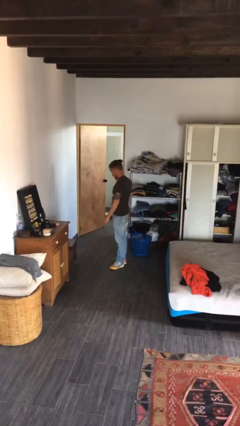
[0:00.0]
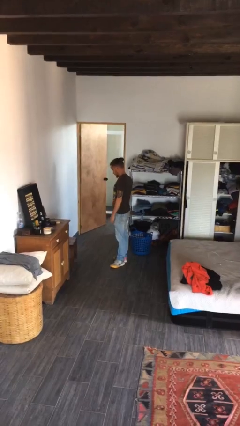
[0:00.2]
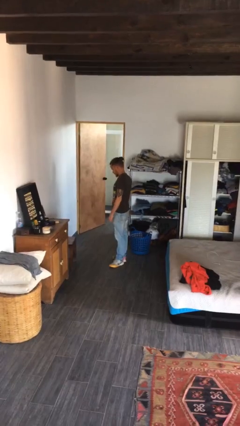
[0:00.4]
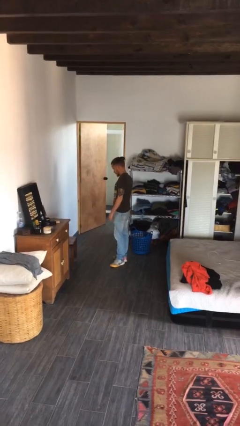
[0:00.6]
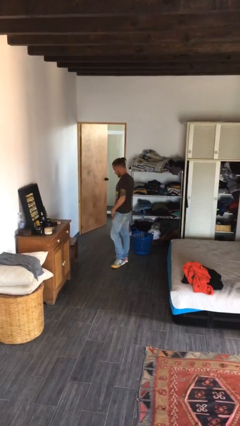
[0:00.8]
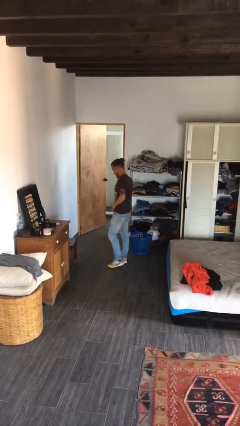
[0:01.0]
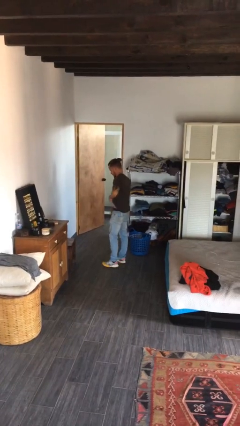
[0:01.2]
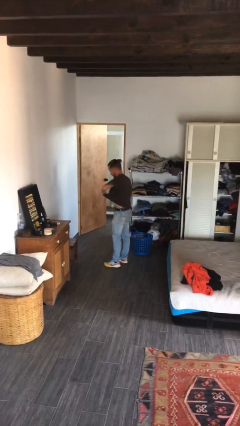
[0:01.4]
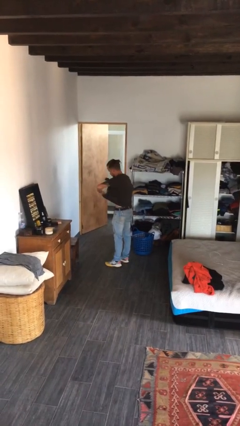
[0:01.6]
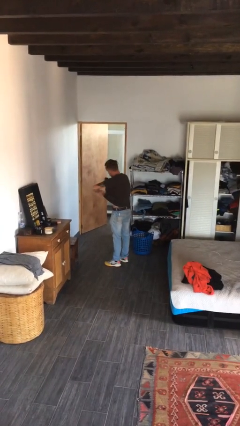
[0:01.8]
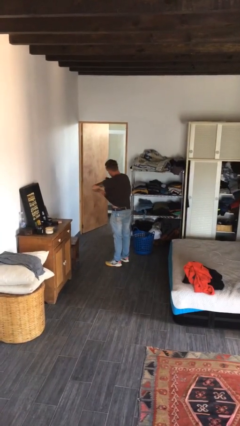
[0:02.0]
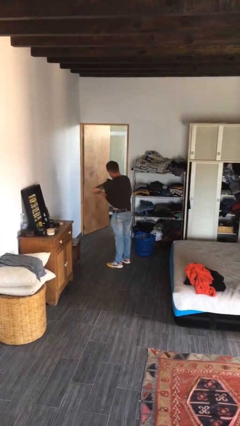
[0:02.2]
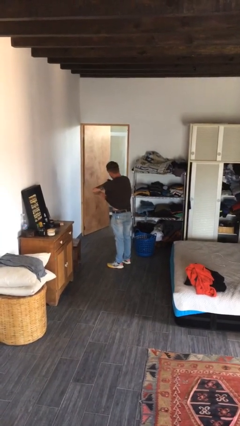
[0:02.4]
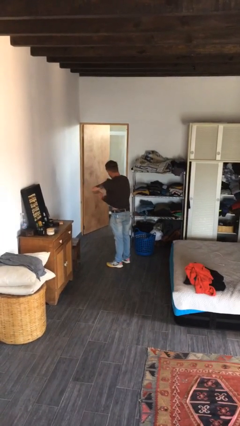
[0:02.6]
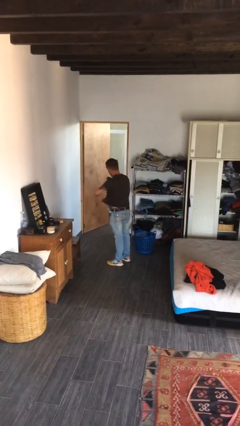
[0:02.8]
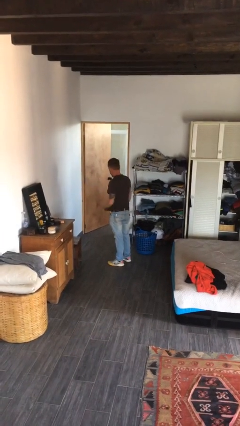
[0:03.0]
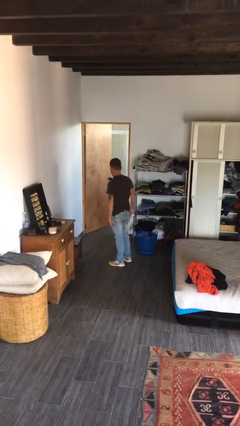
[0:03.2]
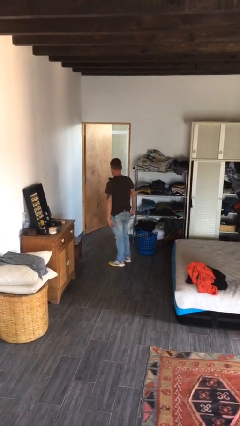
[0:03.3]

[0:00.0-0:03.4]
person applies deodorant

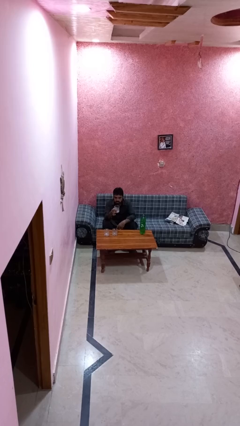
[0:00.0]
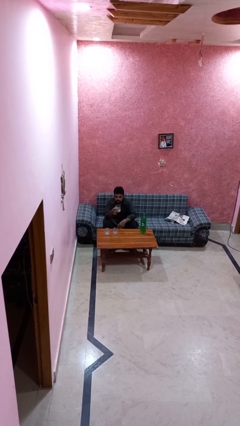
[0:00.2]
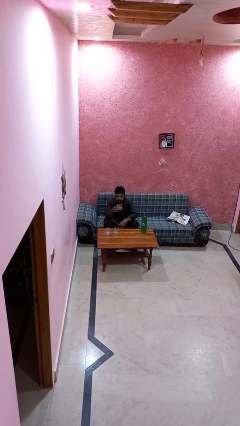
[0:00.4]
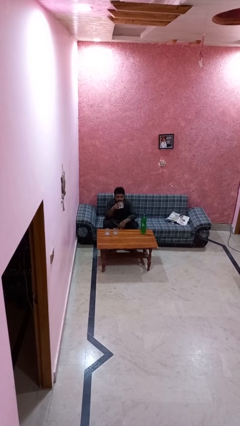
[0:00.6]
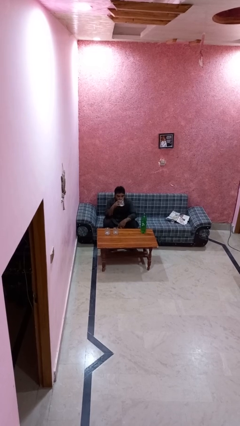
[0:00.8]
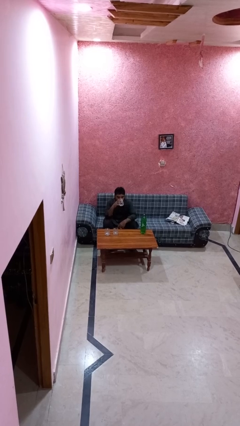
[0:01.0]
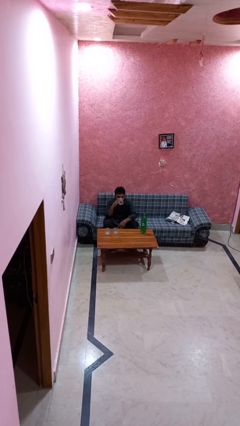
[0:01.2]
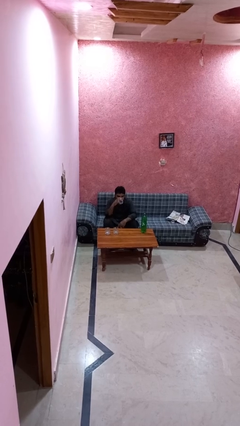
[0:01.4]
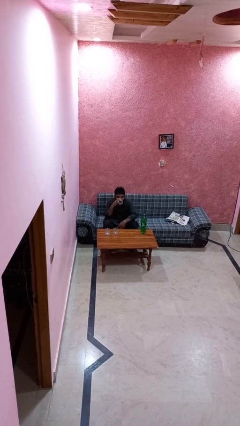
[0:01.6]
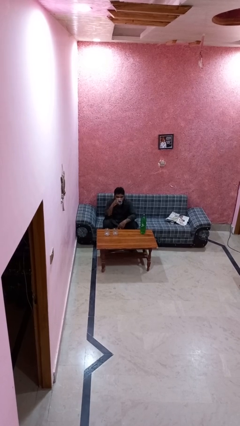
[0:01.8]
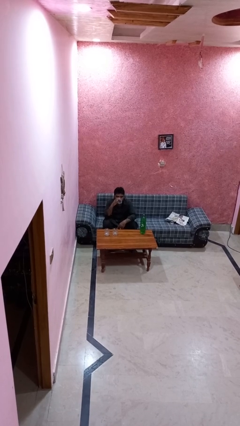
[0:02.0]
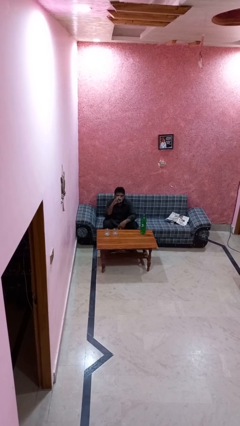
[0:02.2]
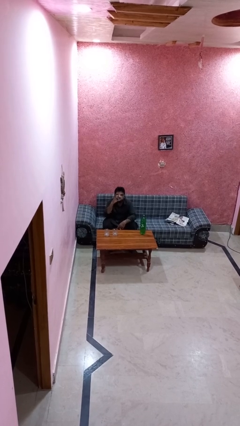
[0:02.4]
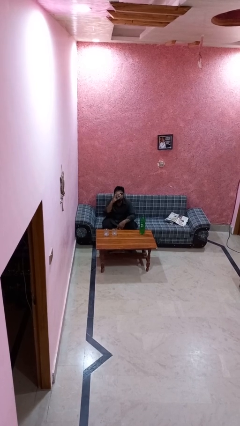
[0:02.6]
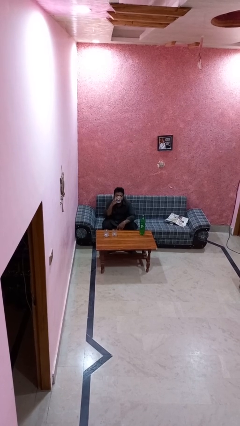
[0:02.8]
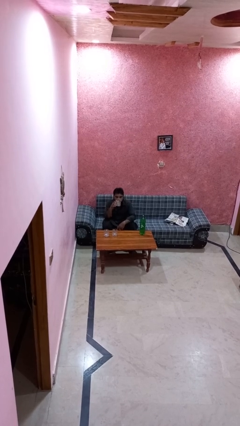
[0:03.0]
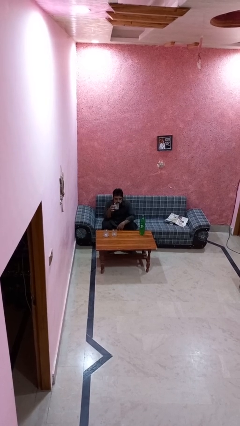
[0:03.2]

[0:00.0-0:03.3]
person drinks from shotglass

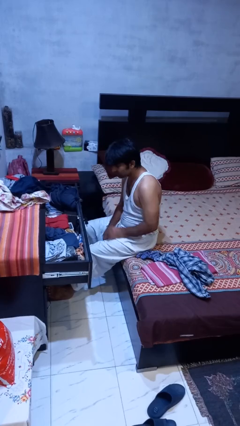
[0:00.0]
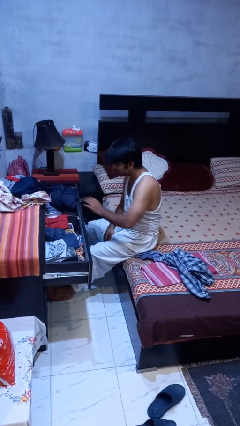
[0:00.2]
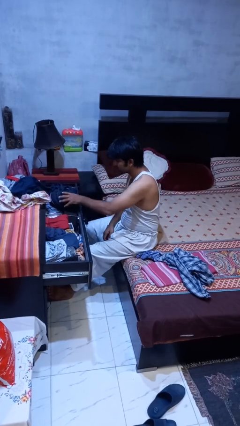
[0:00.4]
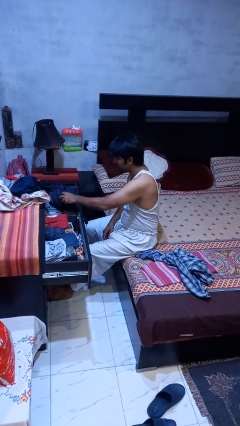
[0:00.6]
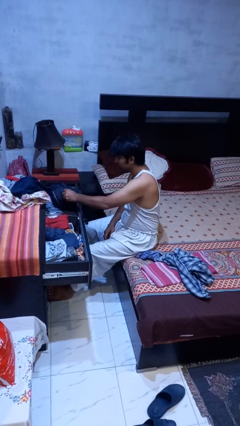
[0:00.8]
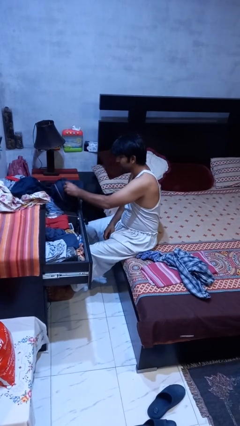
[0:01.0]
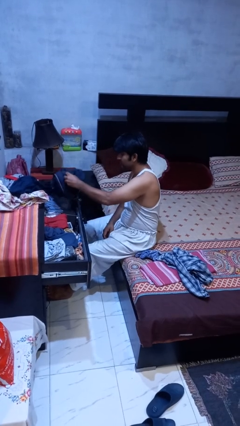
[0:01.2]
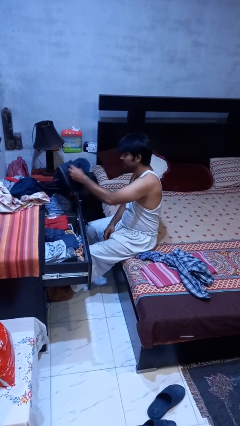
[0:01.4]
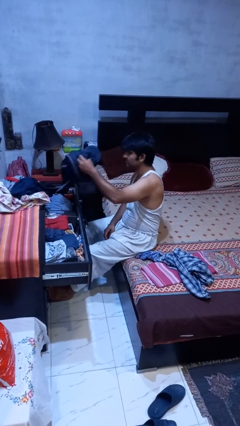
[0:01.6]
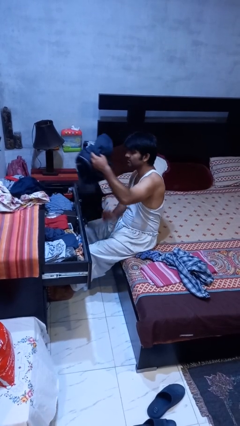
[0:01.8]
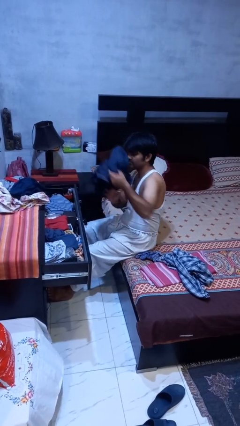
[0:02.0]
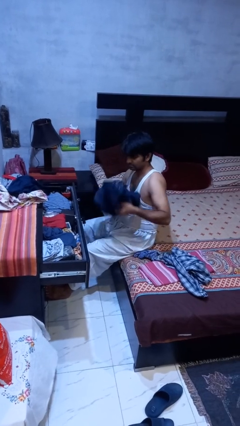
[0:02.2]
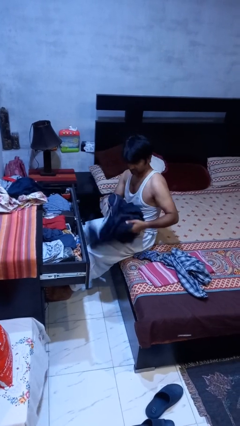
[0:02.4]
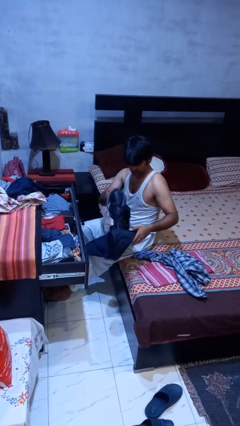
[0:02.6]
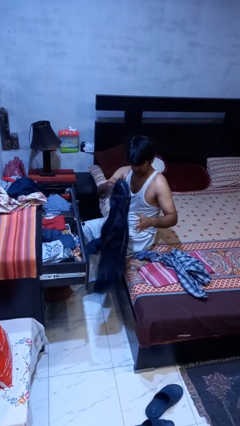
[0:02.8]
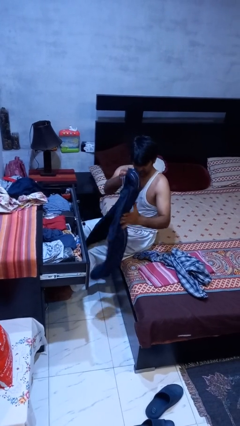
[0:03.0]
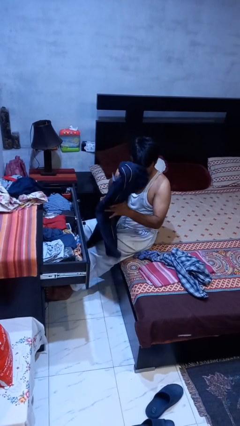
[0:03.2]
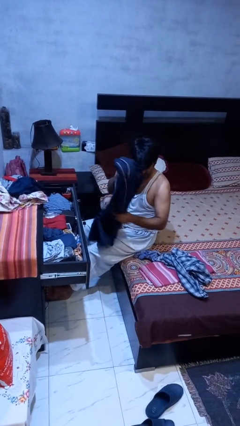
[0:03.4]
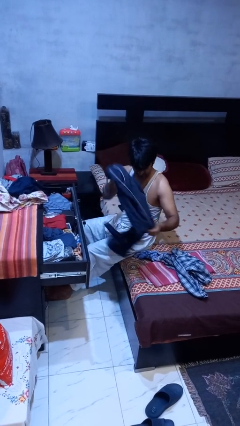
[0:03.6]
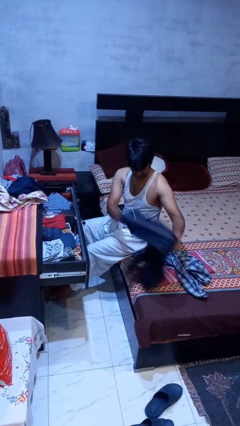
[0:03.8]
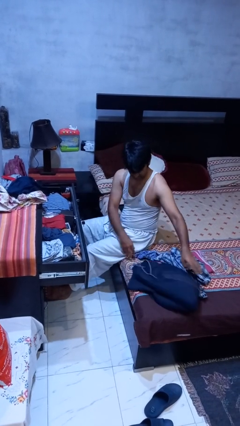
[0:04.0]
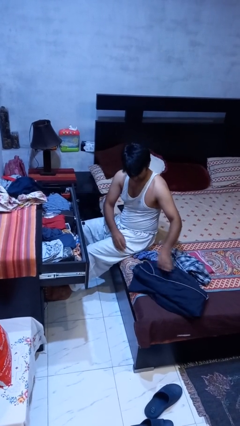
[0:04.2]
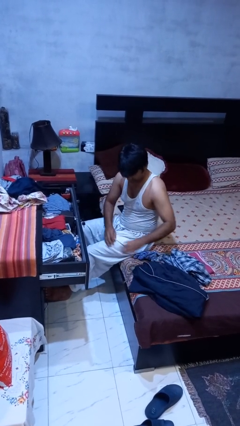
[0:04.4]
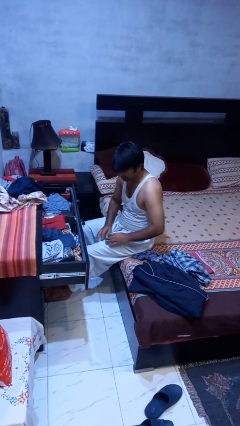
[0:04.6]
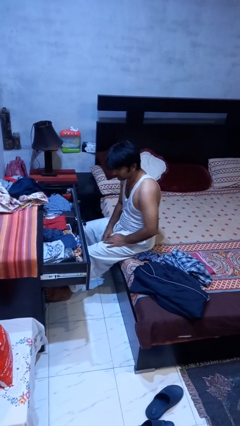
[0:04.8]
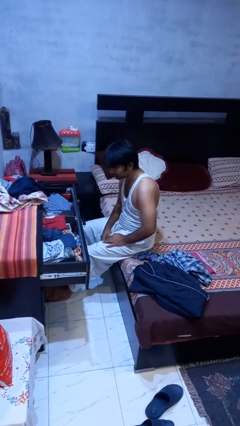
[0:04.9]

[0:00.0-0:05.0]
person takes clothes from dresser

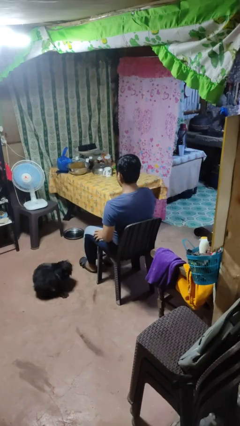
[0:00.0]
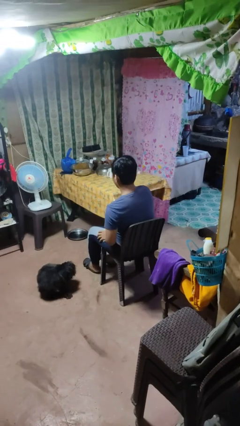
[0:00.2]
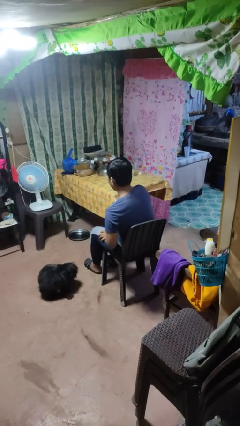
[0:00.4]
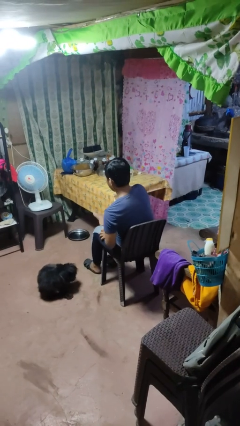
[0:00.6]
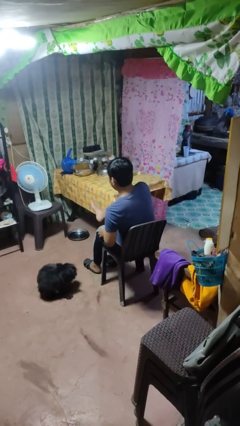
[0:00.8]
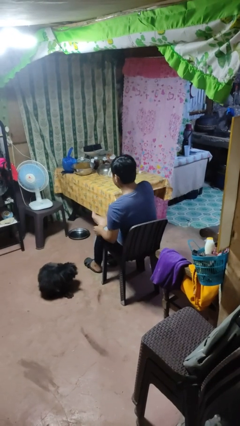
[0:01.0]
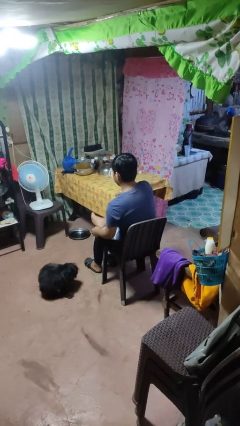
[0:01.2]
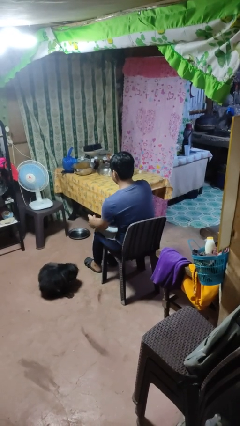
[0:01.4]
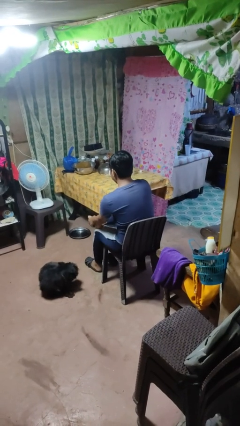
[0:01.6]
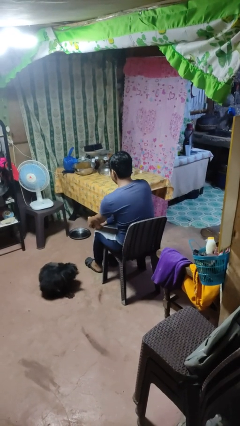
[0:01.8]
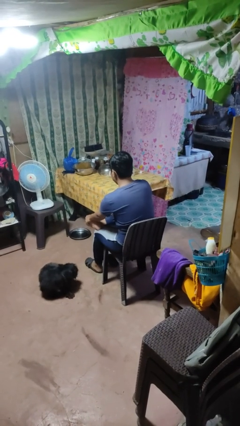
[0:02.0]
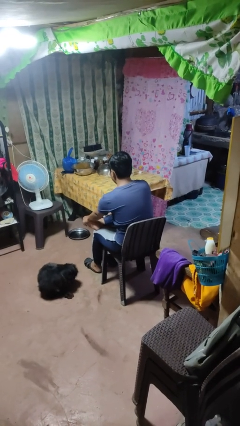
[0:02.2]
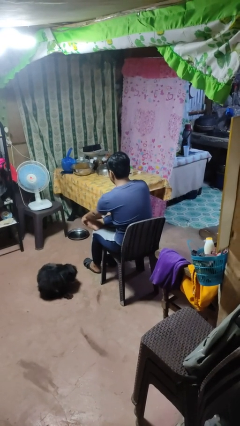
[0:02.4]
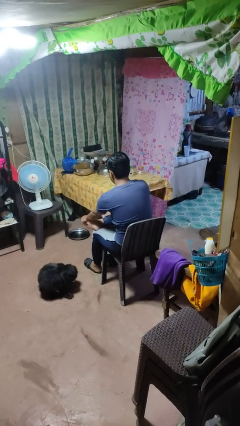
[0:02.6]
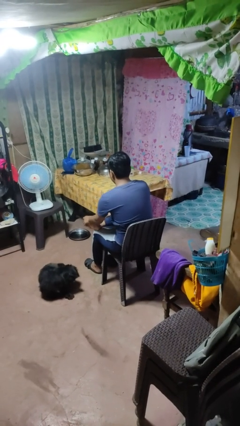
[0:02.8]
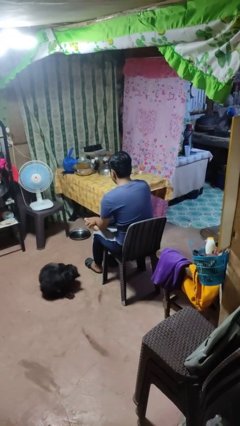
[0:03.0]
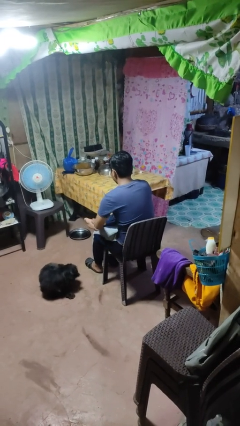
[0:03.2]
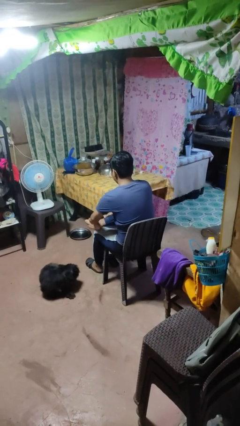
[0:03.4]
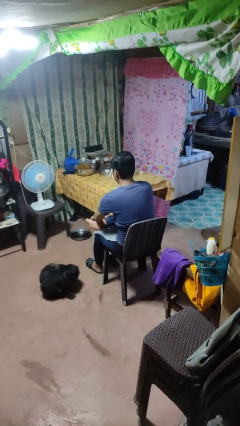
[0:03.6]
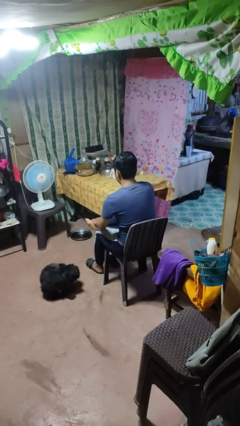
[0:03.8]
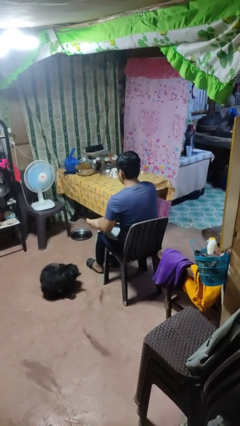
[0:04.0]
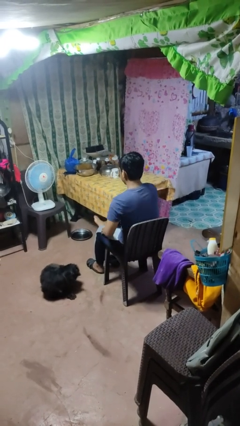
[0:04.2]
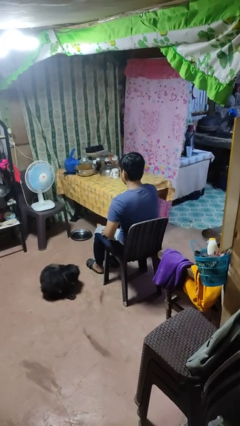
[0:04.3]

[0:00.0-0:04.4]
person rubs foot

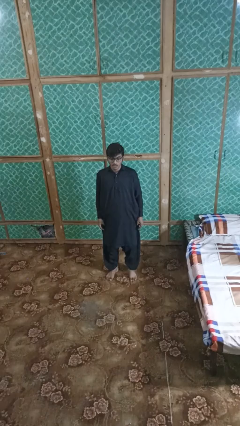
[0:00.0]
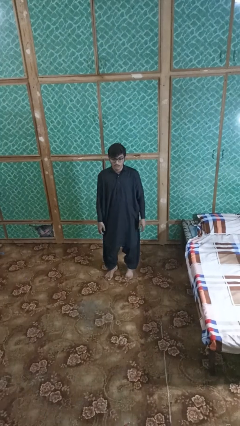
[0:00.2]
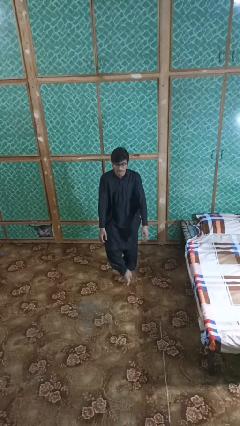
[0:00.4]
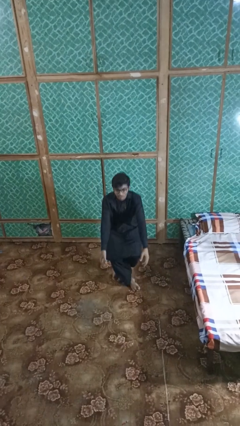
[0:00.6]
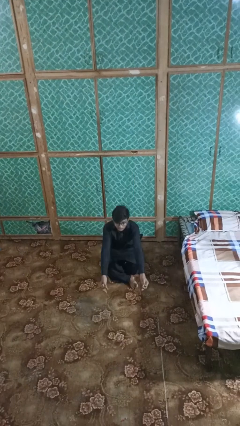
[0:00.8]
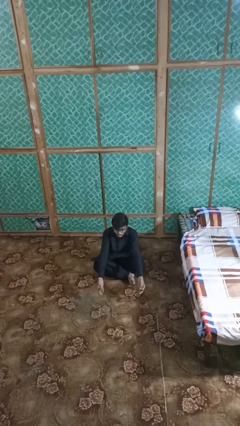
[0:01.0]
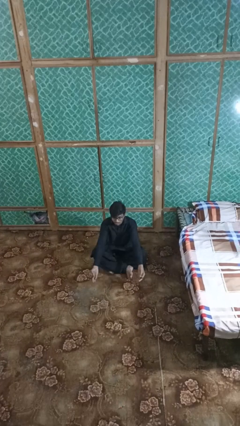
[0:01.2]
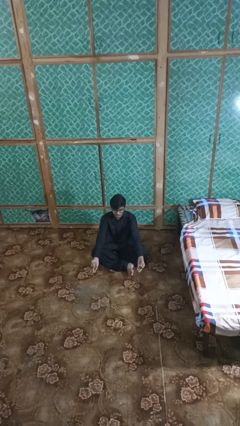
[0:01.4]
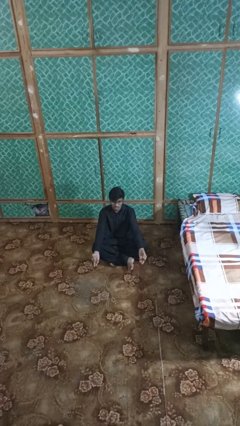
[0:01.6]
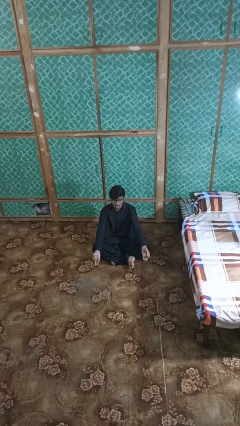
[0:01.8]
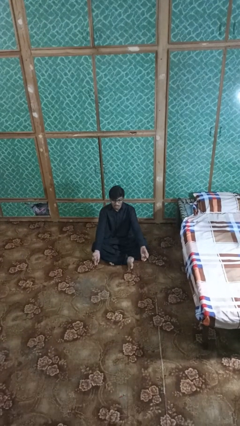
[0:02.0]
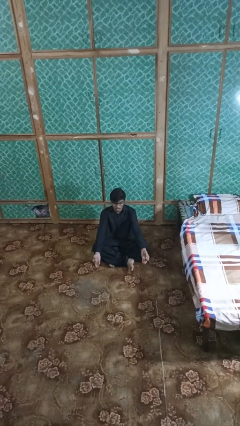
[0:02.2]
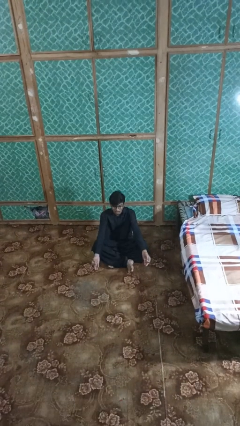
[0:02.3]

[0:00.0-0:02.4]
person sits crisscross
